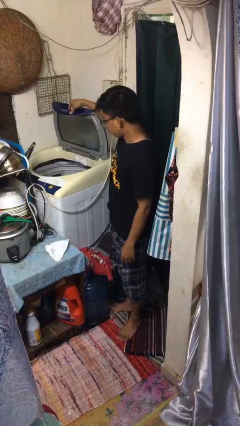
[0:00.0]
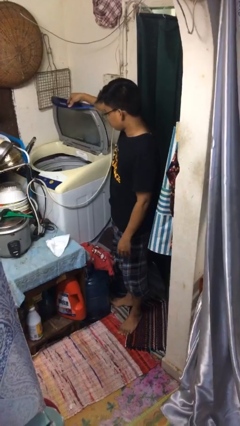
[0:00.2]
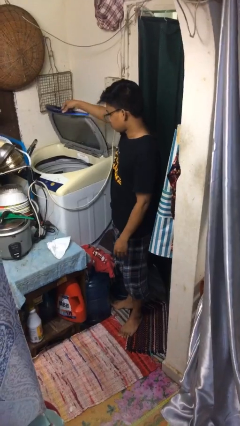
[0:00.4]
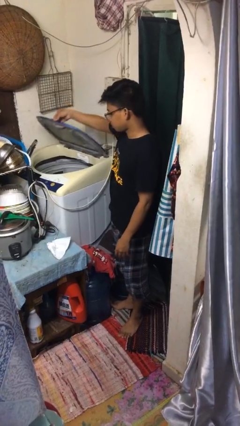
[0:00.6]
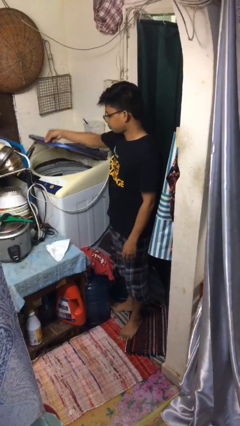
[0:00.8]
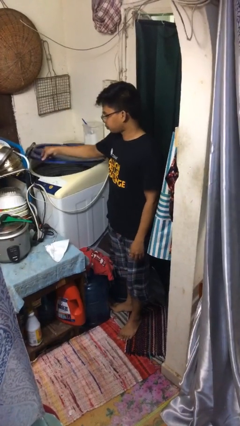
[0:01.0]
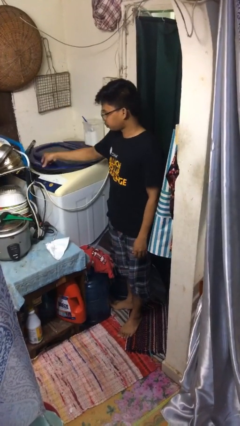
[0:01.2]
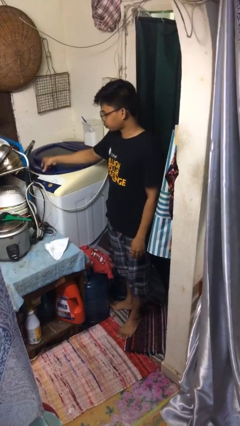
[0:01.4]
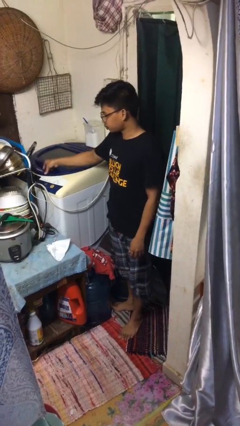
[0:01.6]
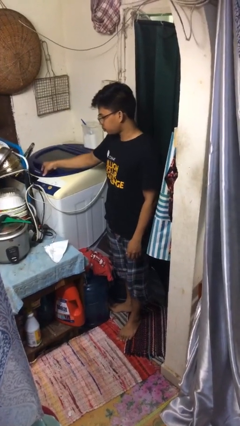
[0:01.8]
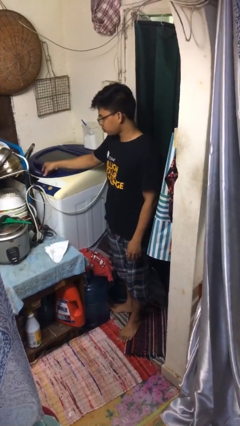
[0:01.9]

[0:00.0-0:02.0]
person closes clothes washer

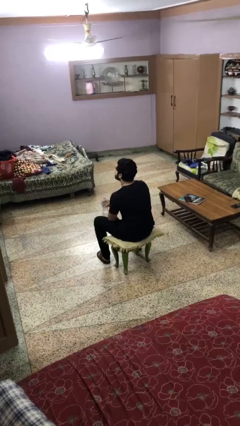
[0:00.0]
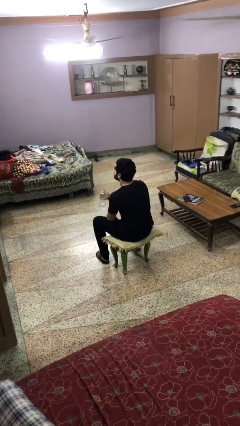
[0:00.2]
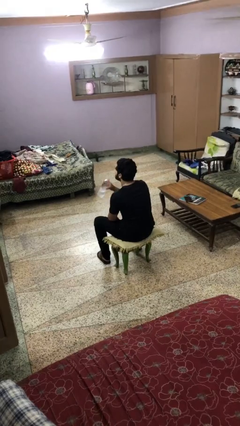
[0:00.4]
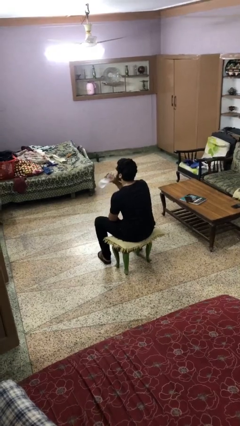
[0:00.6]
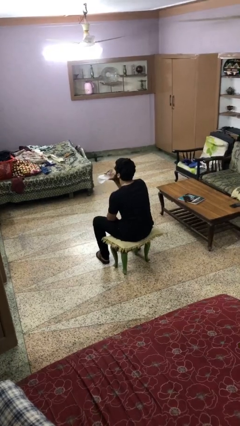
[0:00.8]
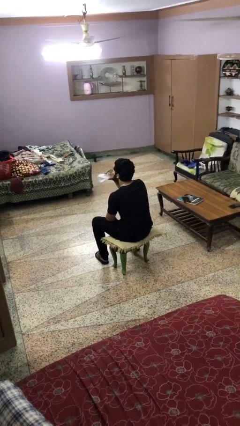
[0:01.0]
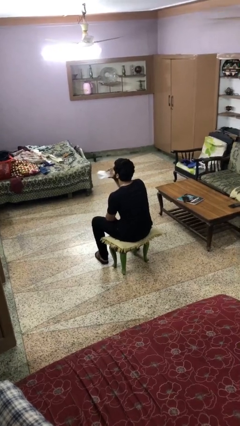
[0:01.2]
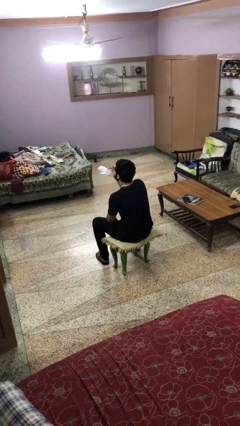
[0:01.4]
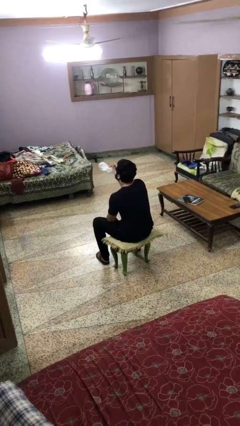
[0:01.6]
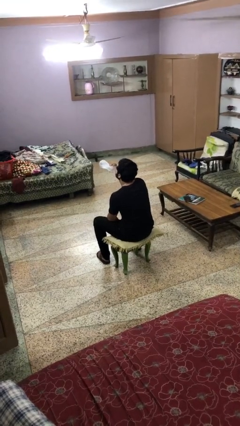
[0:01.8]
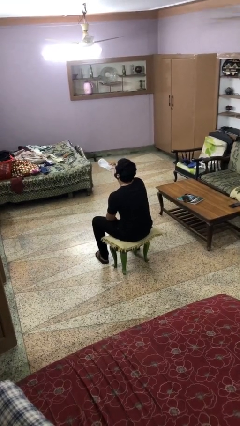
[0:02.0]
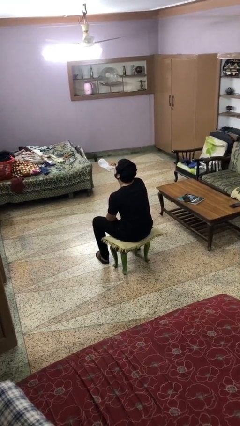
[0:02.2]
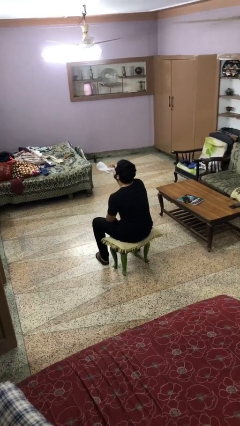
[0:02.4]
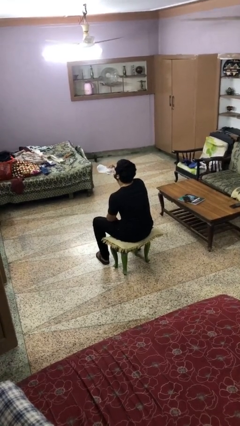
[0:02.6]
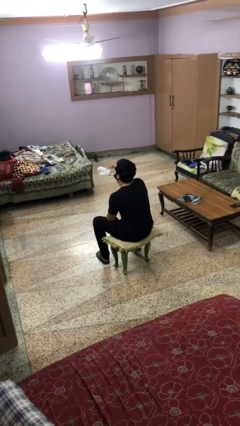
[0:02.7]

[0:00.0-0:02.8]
person drinks from bottle

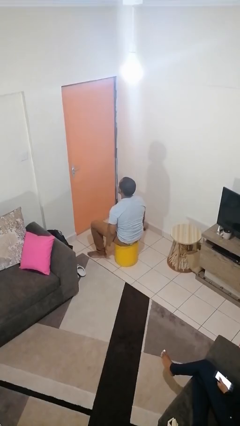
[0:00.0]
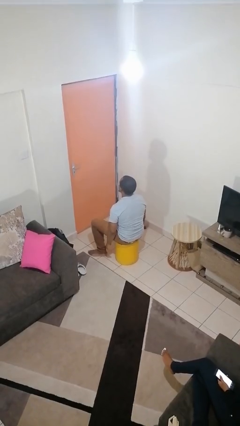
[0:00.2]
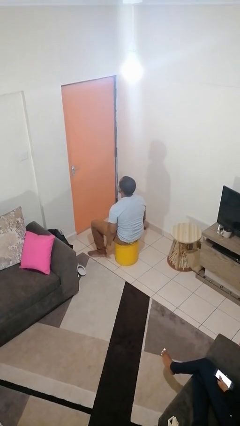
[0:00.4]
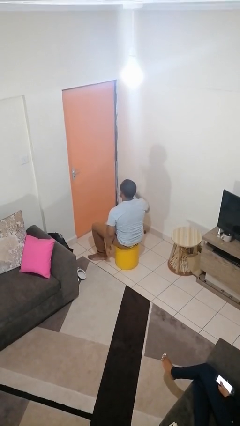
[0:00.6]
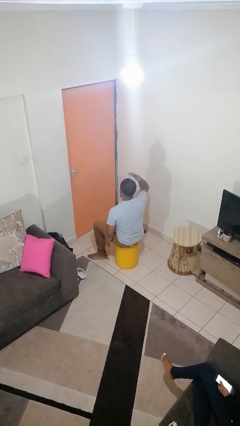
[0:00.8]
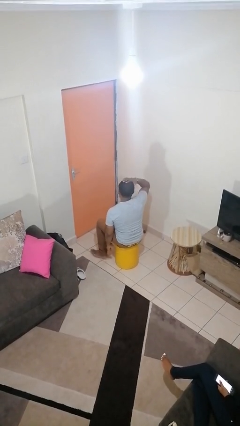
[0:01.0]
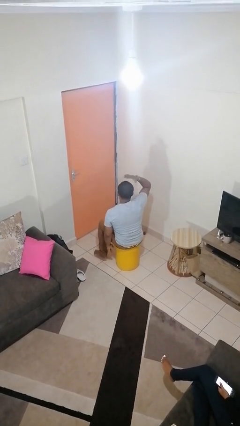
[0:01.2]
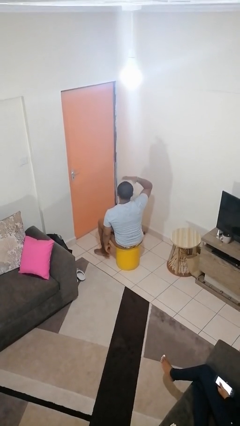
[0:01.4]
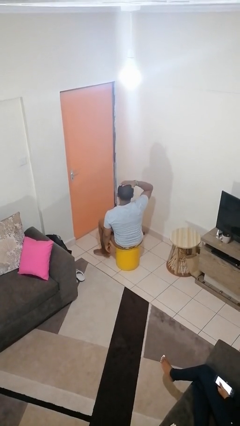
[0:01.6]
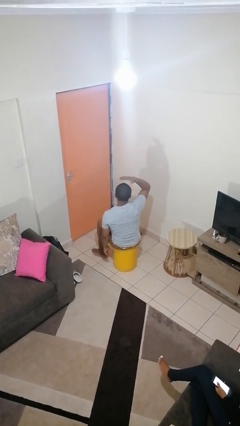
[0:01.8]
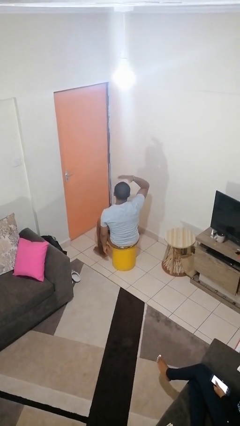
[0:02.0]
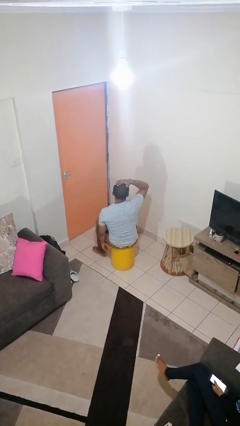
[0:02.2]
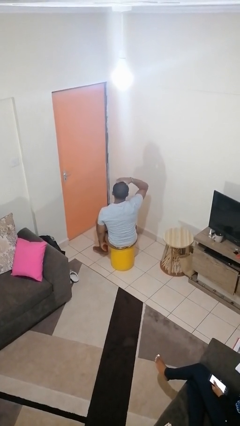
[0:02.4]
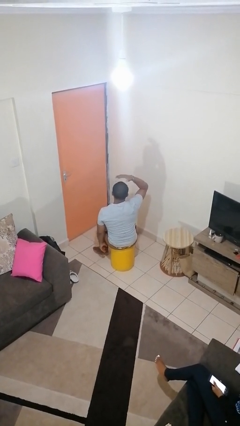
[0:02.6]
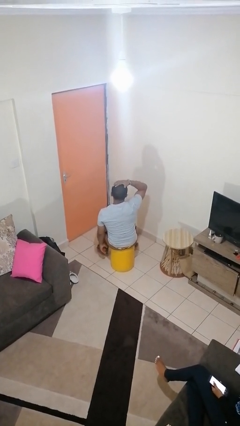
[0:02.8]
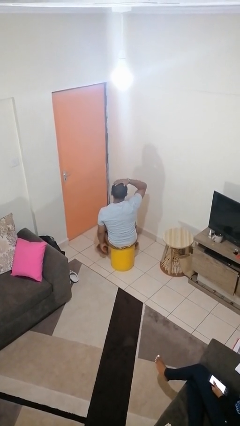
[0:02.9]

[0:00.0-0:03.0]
person pats head

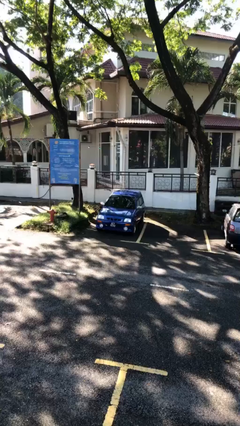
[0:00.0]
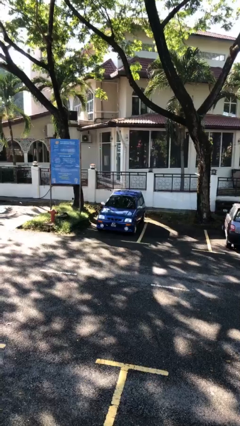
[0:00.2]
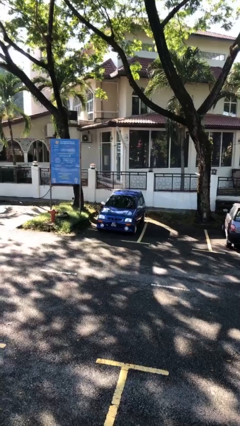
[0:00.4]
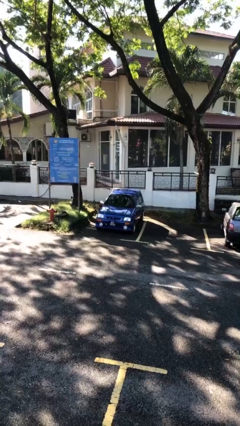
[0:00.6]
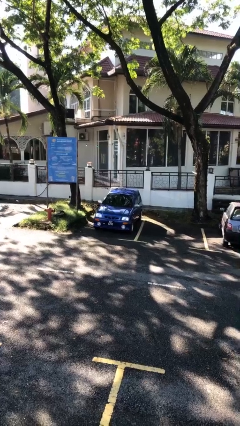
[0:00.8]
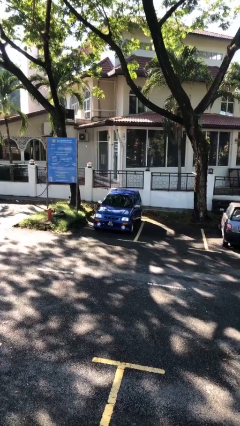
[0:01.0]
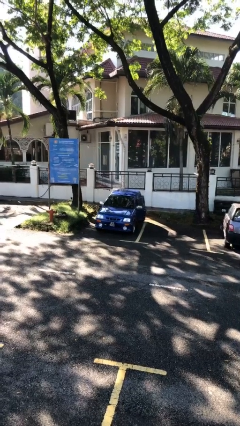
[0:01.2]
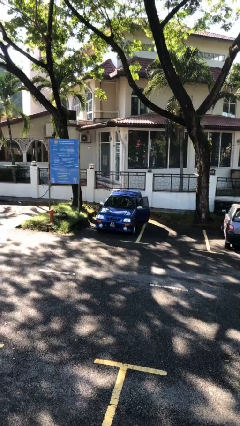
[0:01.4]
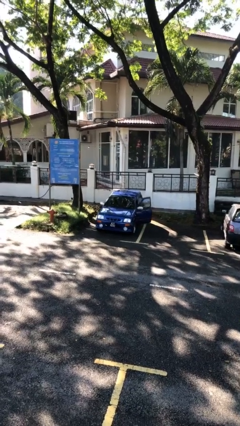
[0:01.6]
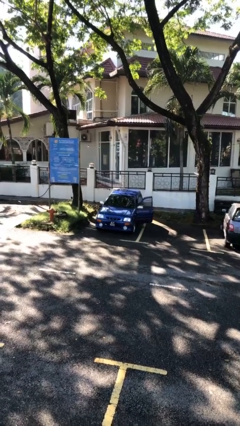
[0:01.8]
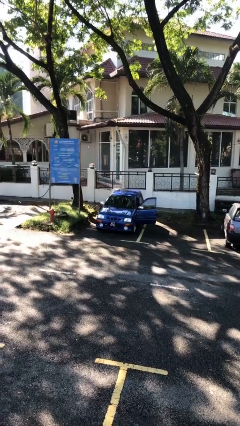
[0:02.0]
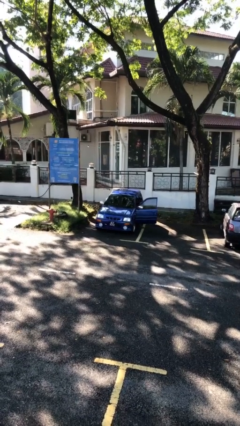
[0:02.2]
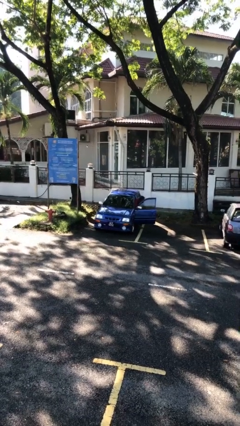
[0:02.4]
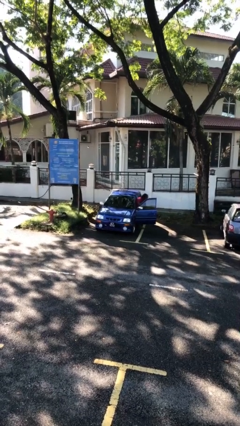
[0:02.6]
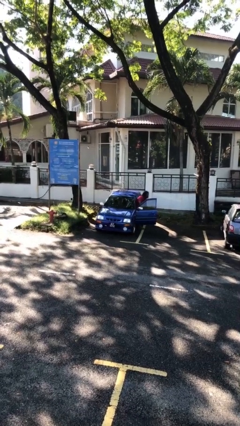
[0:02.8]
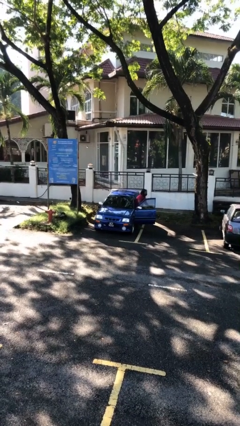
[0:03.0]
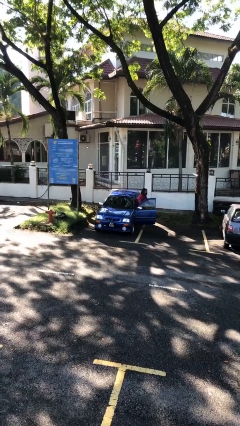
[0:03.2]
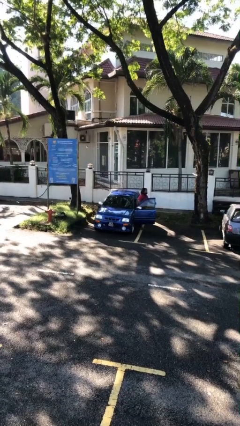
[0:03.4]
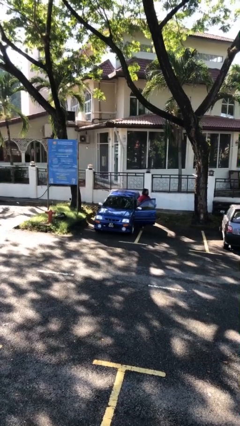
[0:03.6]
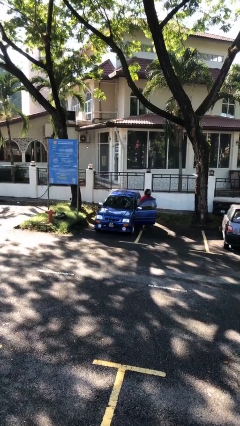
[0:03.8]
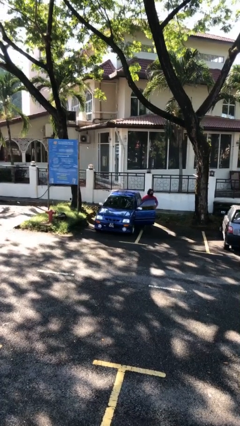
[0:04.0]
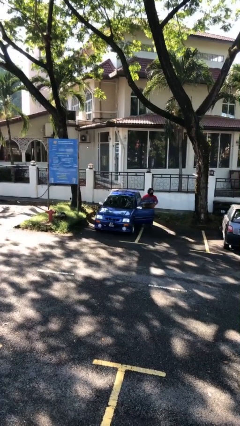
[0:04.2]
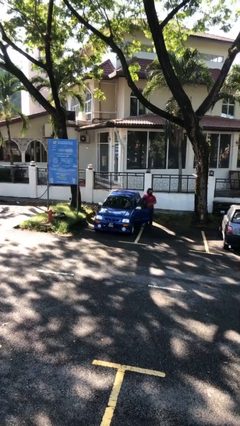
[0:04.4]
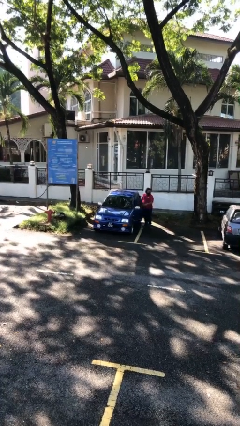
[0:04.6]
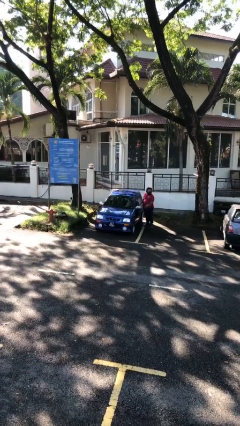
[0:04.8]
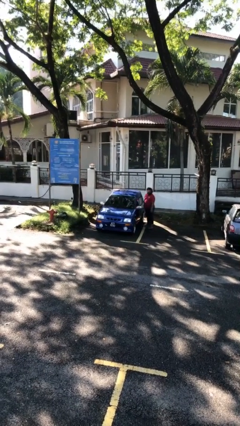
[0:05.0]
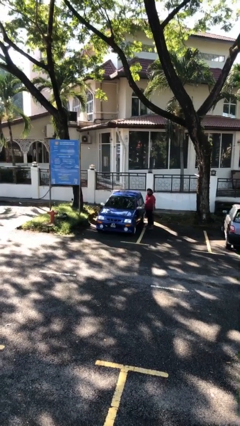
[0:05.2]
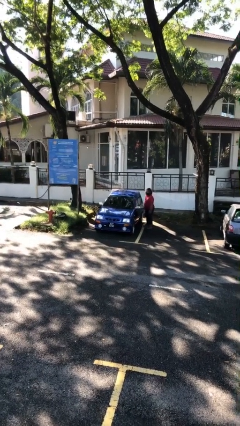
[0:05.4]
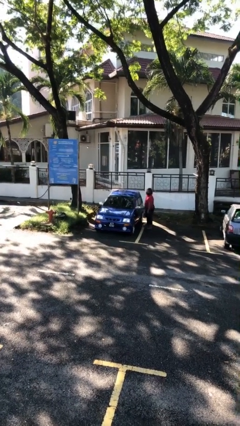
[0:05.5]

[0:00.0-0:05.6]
car drops off person

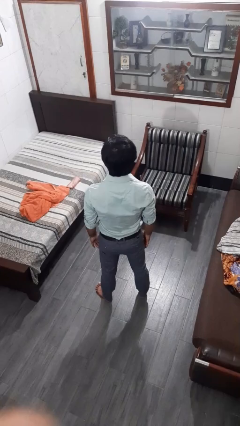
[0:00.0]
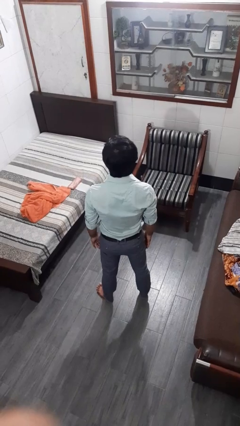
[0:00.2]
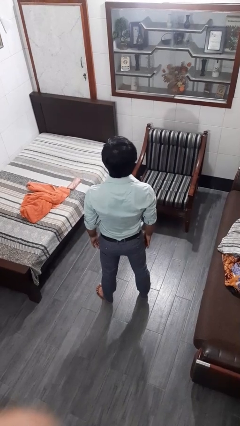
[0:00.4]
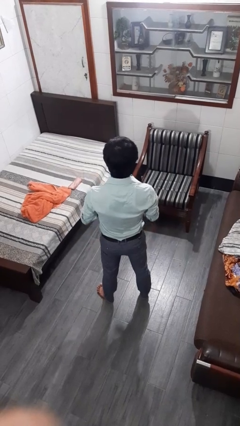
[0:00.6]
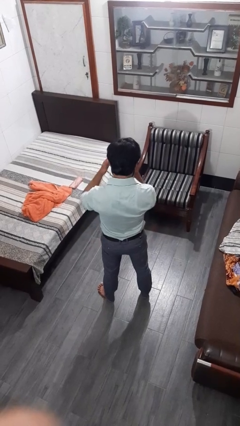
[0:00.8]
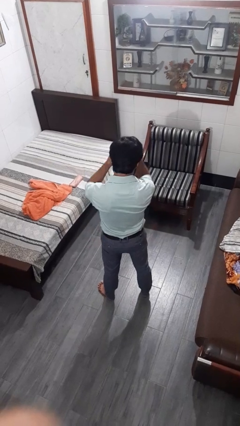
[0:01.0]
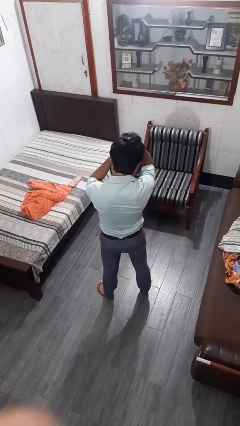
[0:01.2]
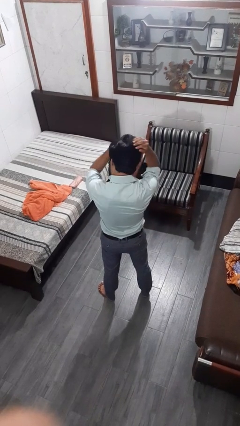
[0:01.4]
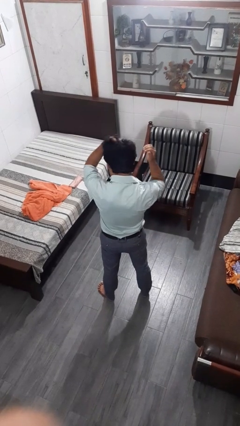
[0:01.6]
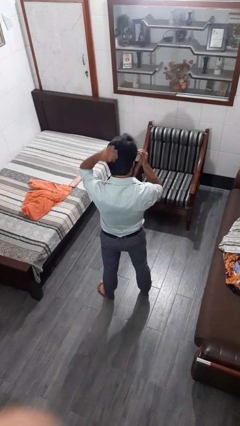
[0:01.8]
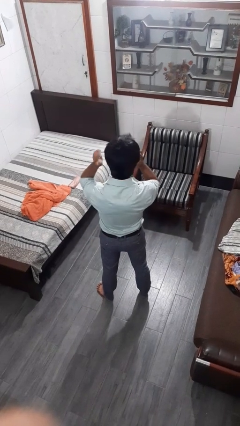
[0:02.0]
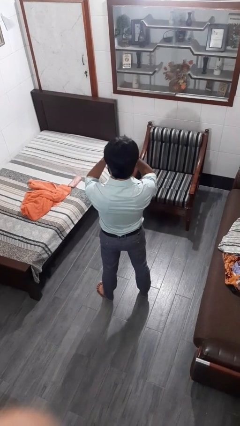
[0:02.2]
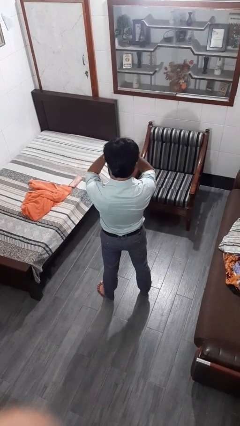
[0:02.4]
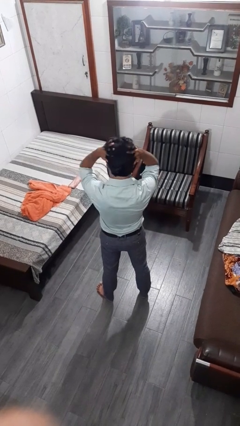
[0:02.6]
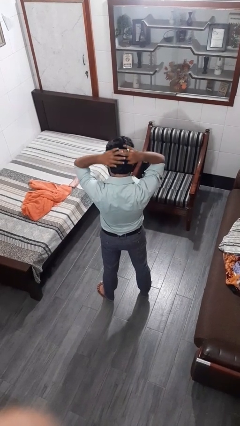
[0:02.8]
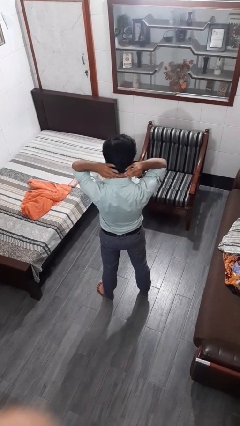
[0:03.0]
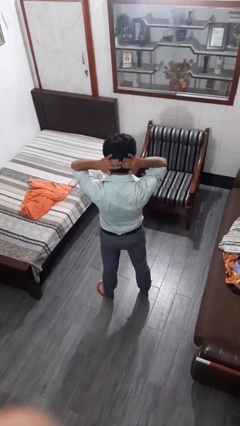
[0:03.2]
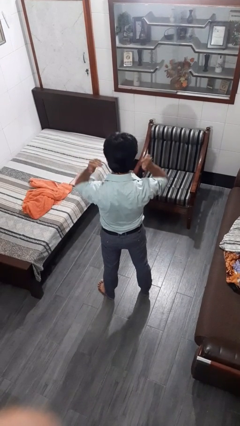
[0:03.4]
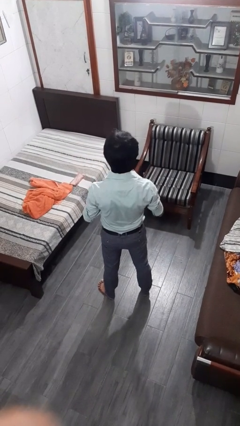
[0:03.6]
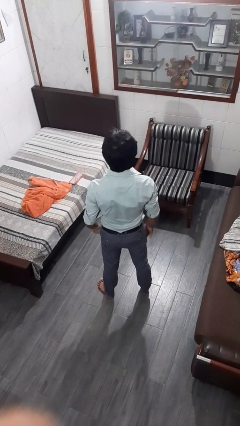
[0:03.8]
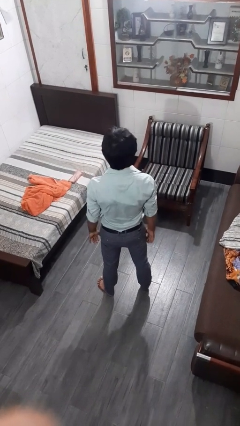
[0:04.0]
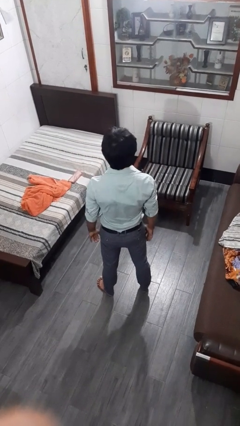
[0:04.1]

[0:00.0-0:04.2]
person strokes hair

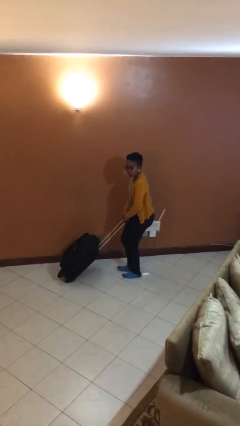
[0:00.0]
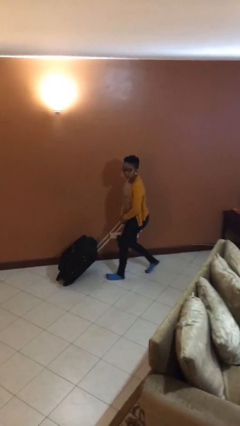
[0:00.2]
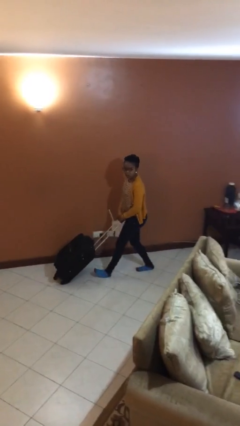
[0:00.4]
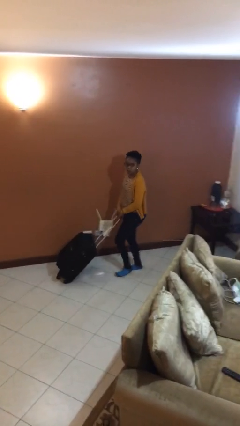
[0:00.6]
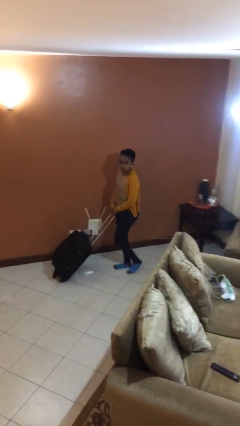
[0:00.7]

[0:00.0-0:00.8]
person pulls wheeled cart
